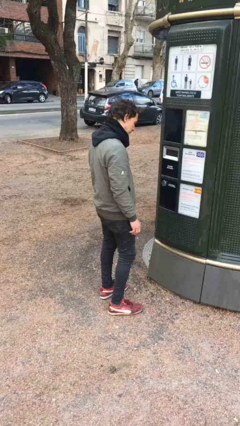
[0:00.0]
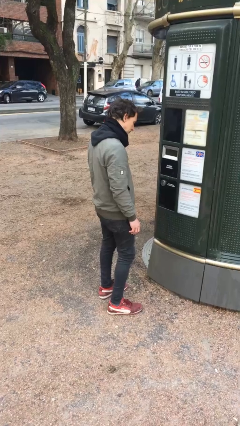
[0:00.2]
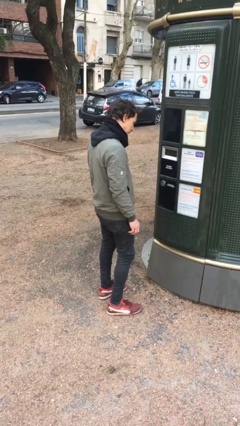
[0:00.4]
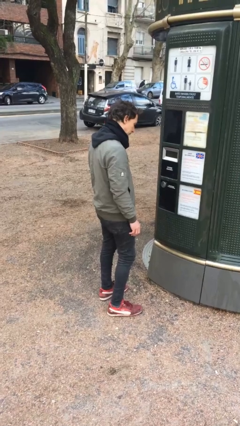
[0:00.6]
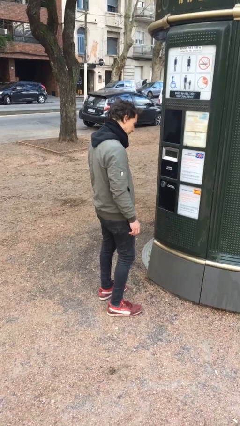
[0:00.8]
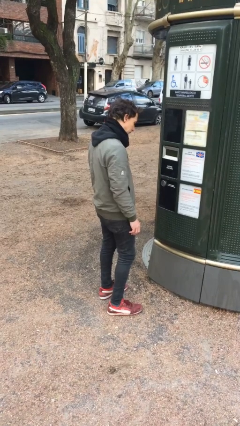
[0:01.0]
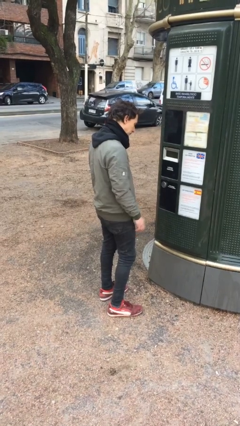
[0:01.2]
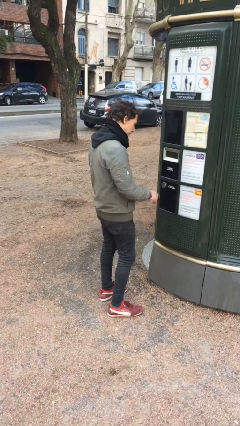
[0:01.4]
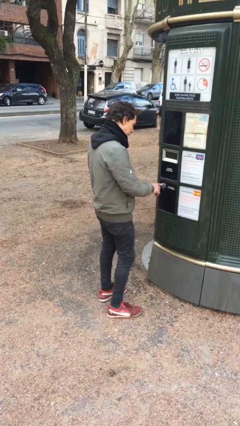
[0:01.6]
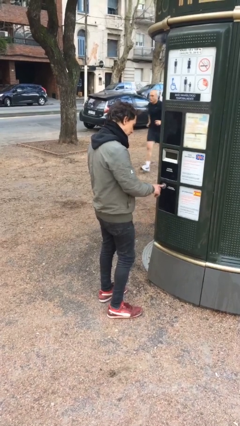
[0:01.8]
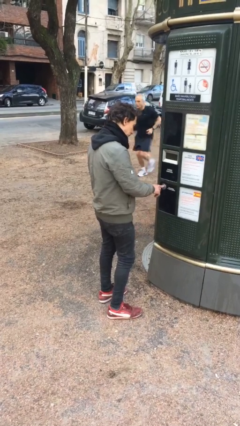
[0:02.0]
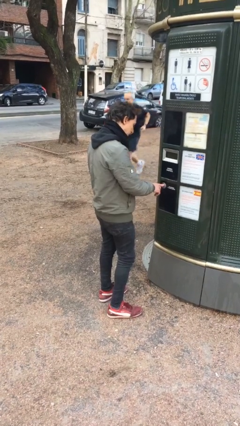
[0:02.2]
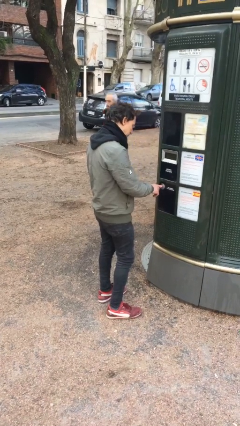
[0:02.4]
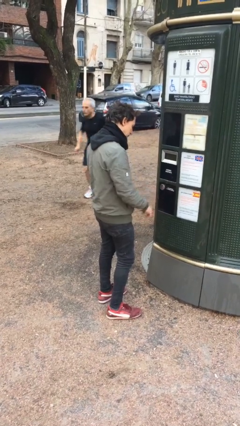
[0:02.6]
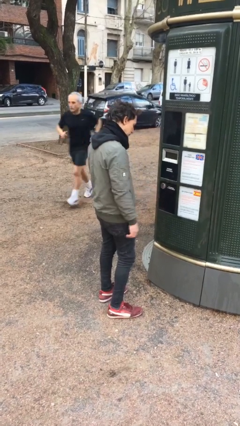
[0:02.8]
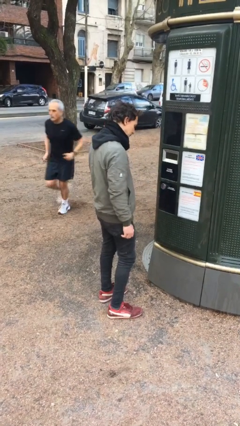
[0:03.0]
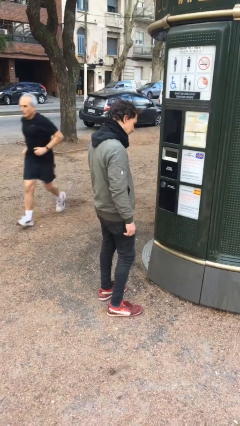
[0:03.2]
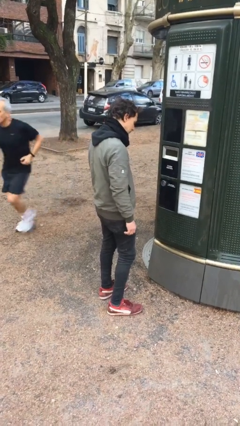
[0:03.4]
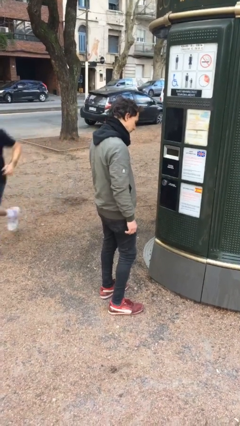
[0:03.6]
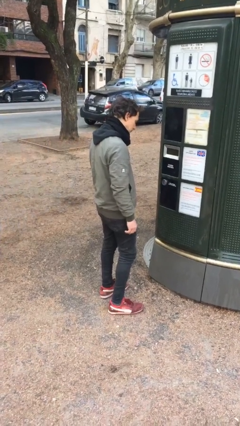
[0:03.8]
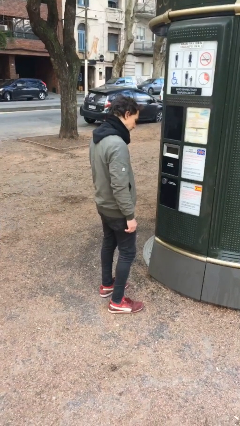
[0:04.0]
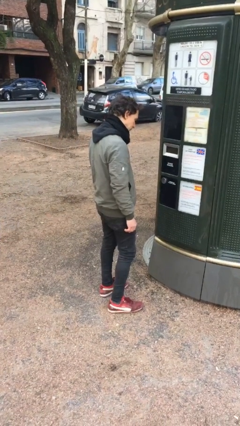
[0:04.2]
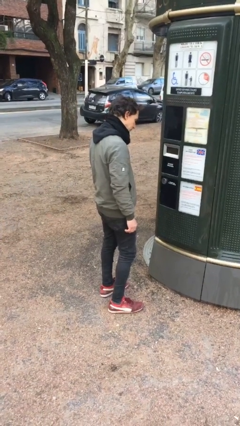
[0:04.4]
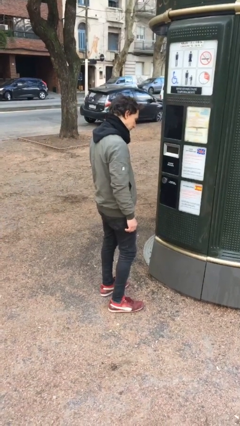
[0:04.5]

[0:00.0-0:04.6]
person purchases from machine

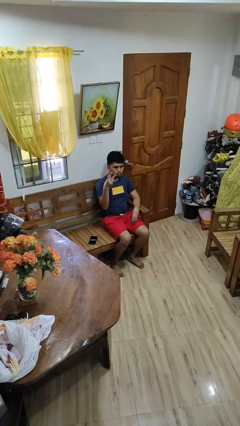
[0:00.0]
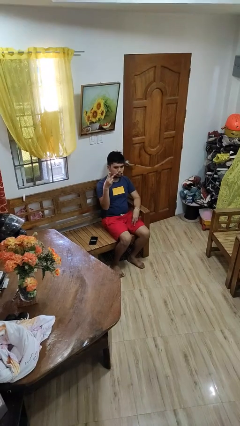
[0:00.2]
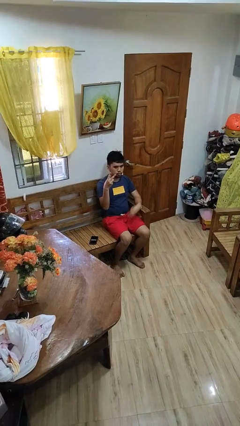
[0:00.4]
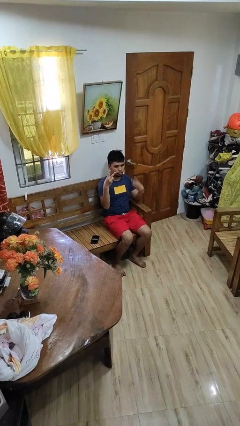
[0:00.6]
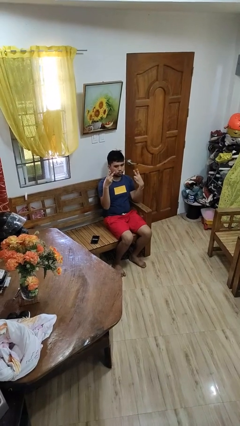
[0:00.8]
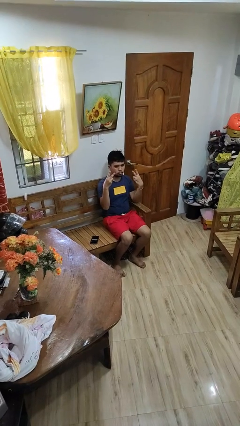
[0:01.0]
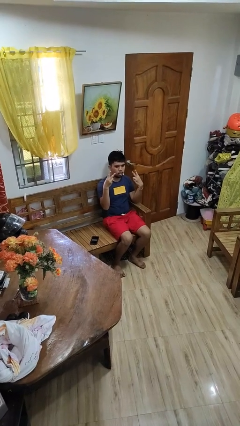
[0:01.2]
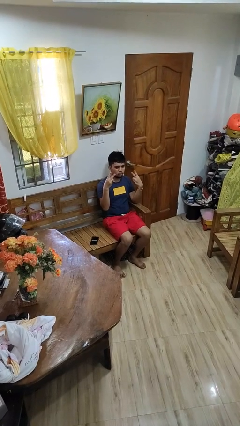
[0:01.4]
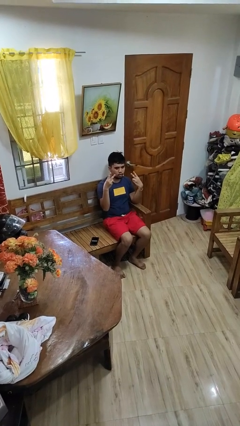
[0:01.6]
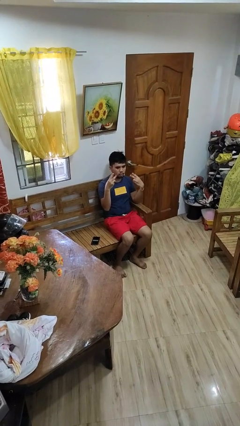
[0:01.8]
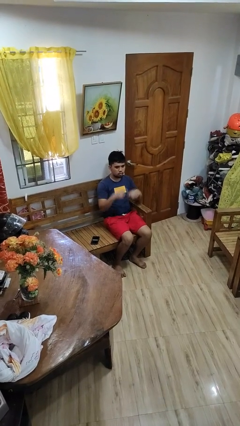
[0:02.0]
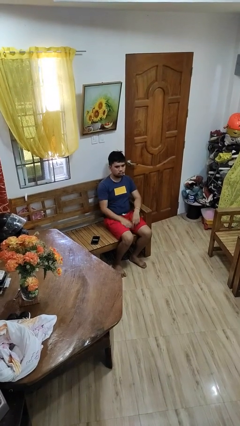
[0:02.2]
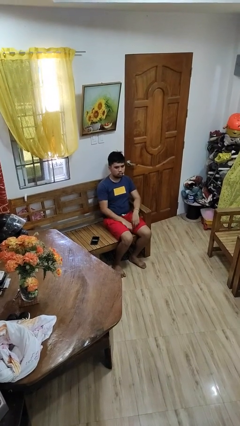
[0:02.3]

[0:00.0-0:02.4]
person gestures peace

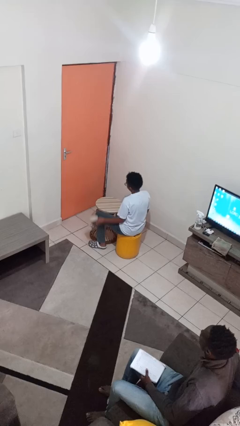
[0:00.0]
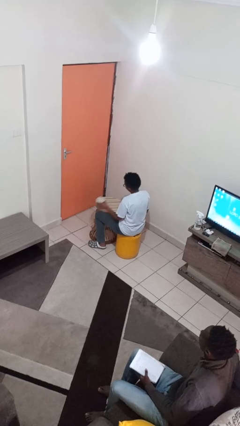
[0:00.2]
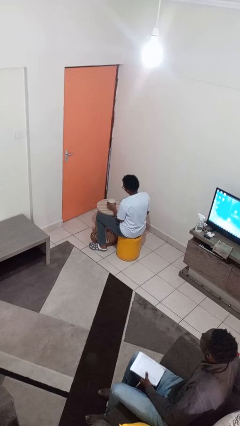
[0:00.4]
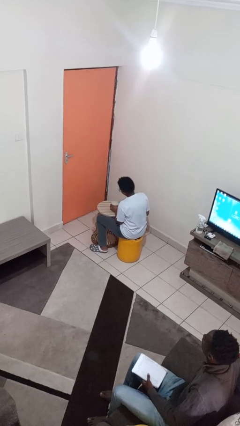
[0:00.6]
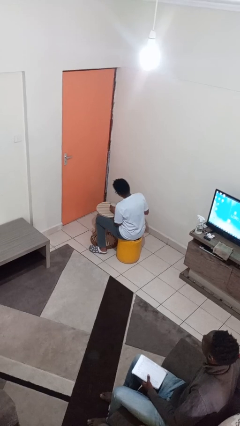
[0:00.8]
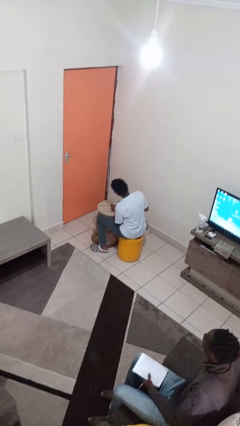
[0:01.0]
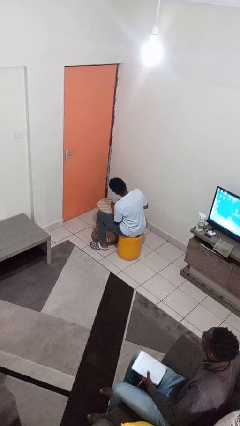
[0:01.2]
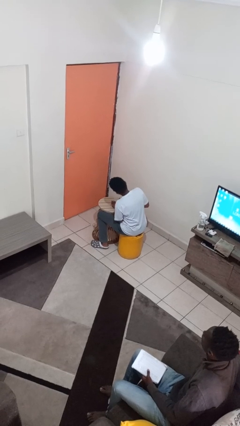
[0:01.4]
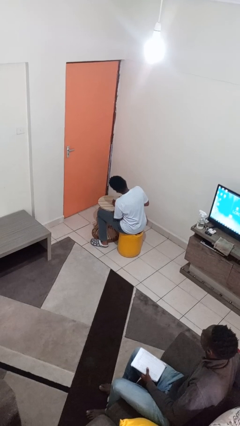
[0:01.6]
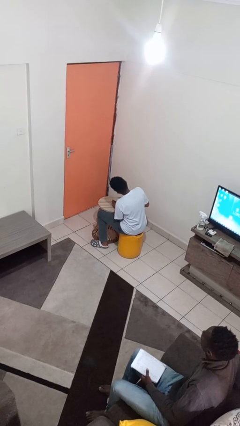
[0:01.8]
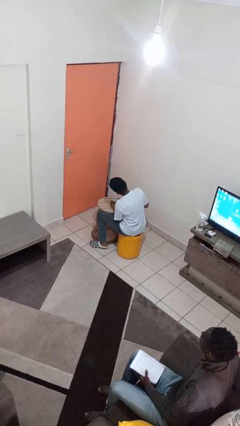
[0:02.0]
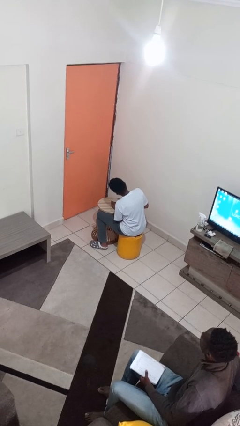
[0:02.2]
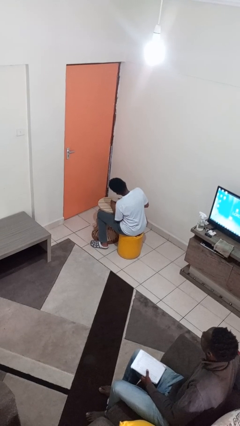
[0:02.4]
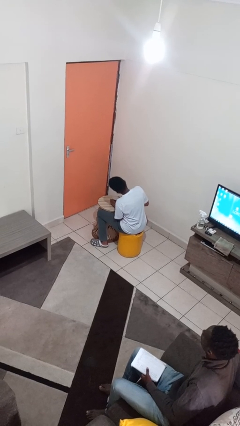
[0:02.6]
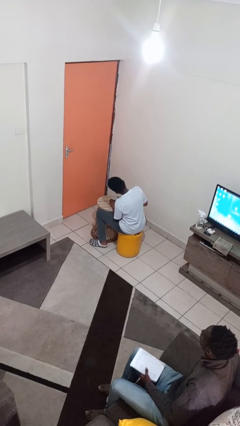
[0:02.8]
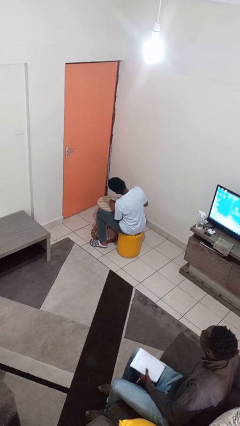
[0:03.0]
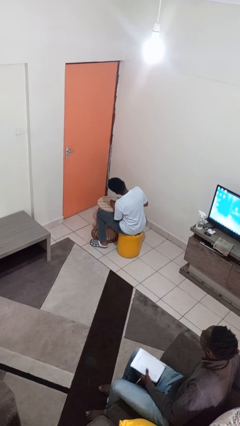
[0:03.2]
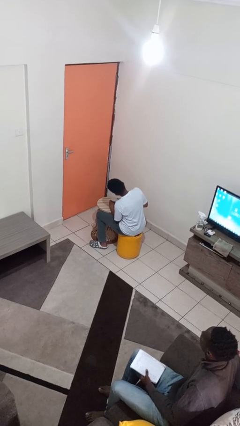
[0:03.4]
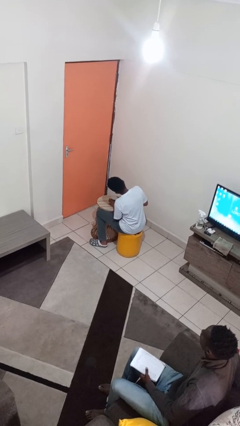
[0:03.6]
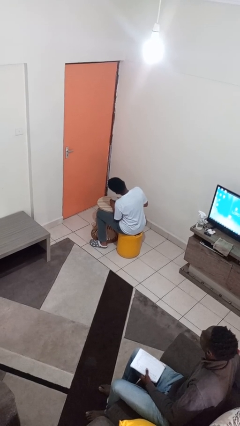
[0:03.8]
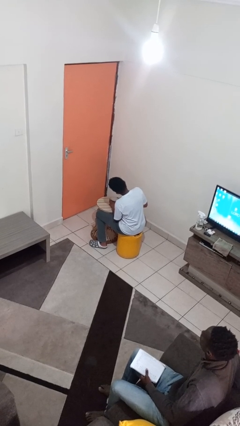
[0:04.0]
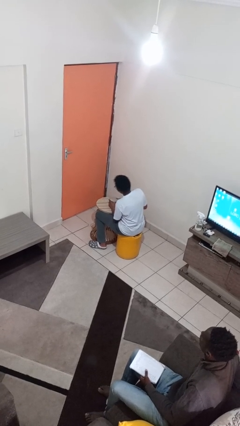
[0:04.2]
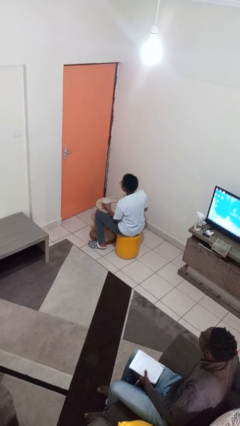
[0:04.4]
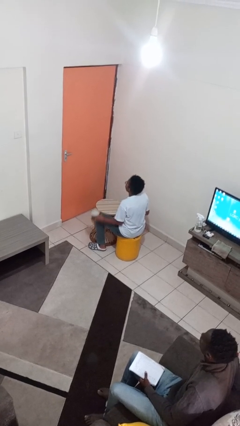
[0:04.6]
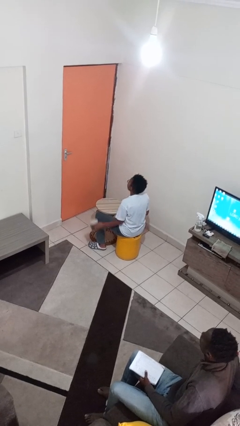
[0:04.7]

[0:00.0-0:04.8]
person opens can with can opener

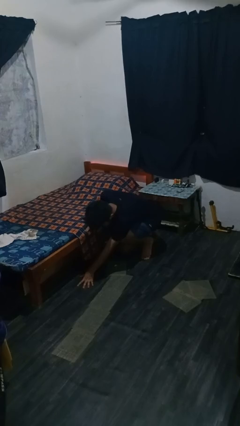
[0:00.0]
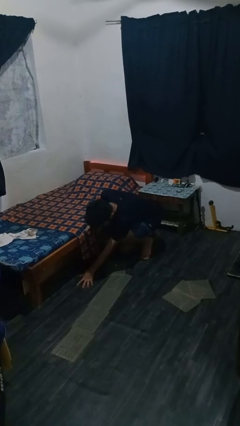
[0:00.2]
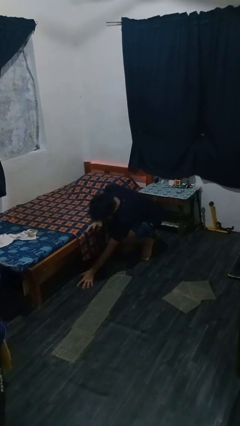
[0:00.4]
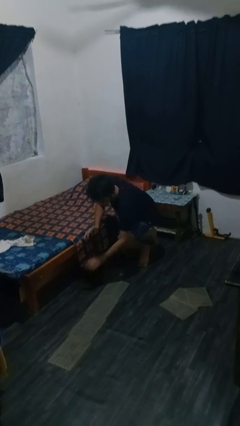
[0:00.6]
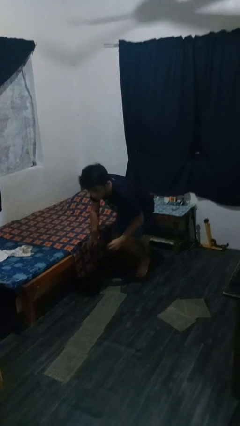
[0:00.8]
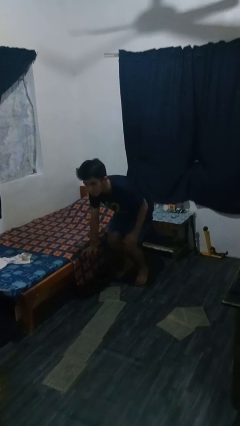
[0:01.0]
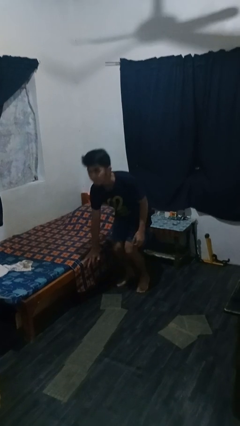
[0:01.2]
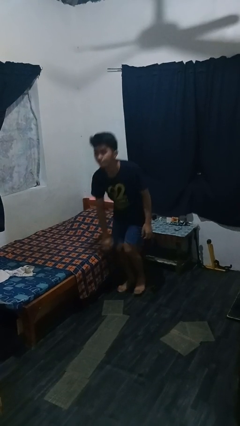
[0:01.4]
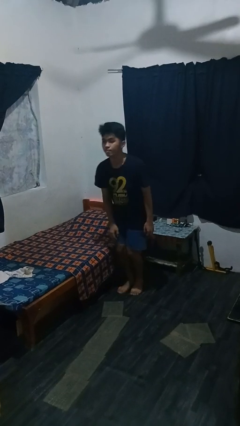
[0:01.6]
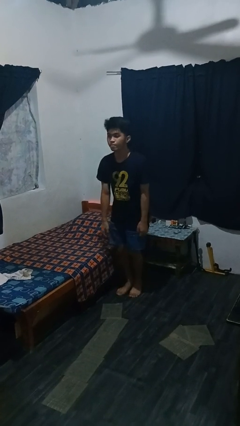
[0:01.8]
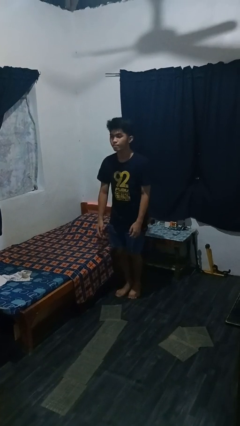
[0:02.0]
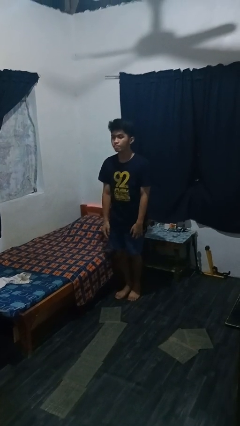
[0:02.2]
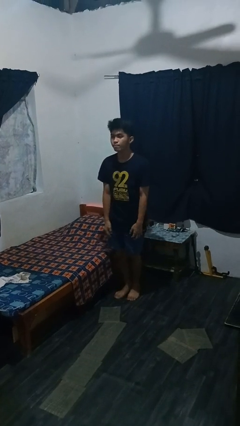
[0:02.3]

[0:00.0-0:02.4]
person stands up from floor

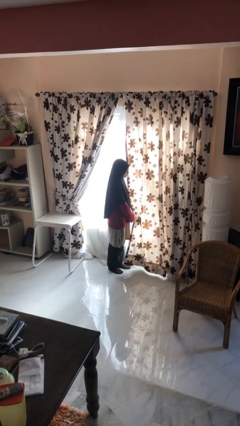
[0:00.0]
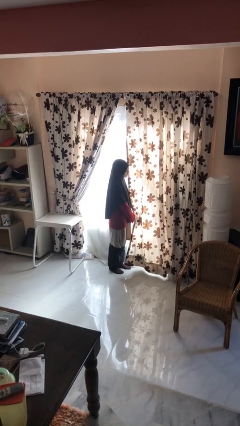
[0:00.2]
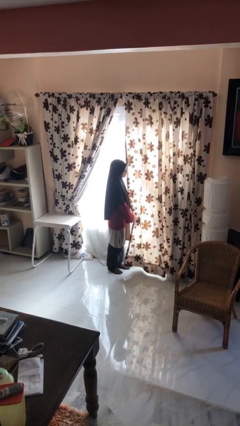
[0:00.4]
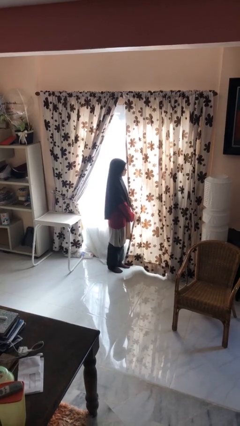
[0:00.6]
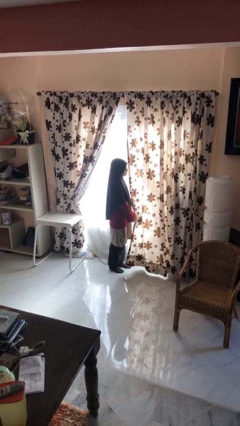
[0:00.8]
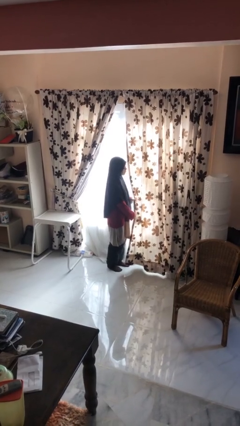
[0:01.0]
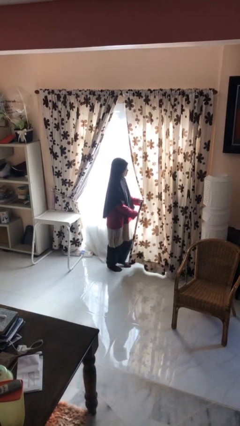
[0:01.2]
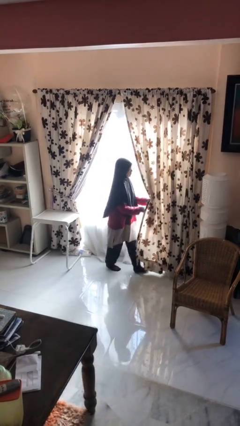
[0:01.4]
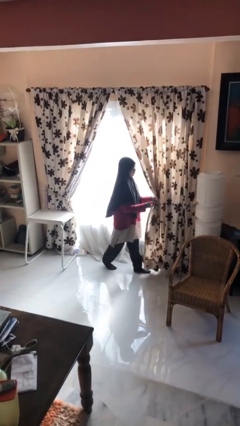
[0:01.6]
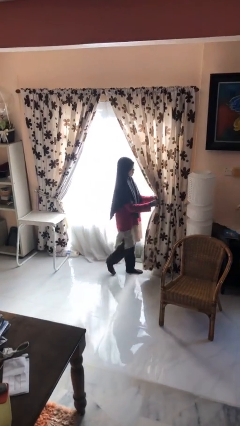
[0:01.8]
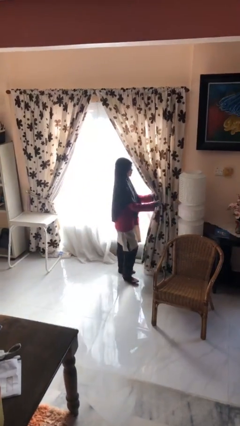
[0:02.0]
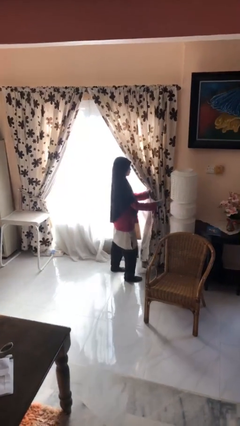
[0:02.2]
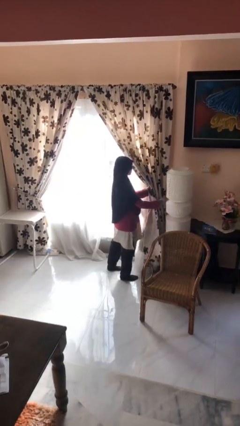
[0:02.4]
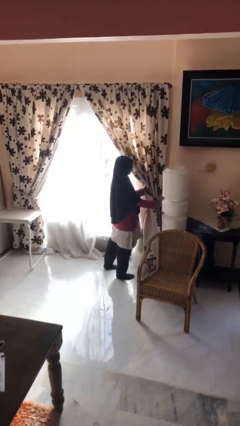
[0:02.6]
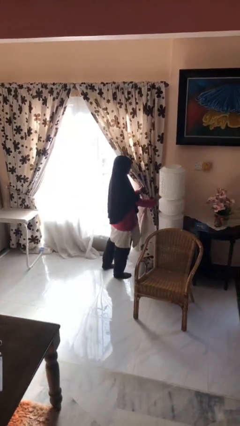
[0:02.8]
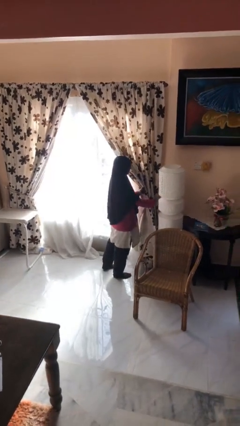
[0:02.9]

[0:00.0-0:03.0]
person opens curtains

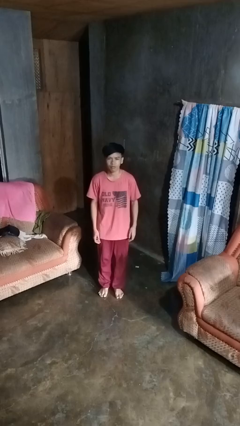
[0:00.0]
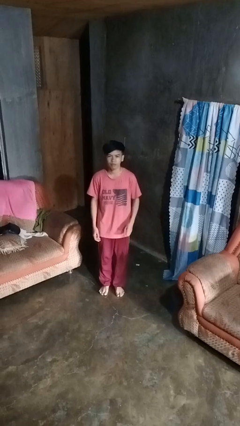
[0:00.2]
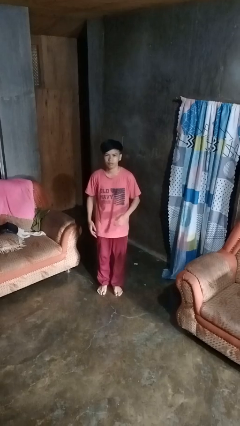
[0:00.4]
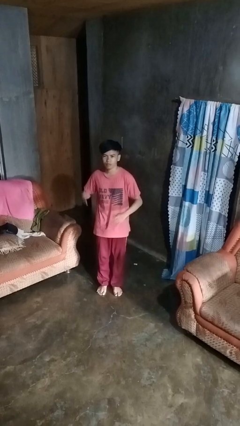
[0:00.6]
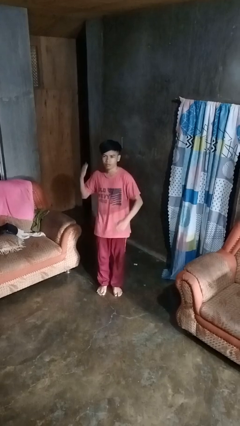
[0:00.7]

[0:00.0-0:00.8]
person karate chop
